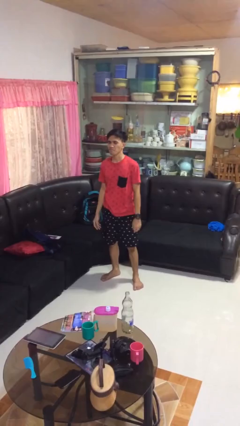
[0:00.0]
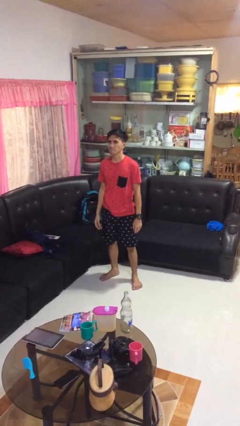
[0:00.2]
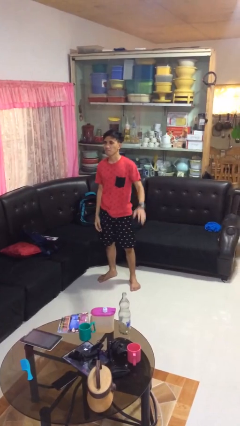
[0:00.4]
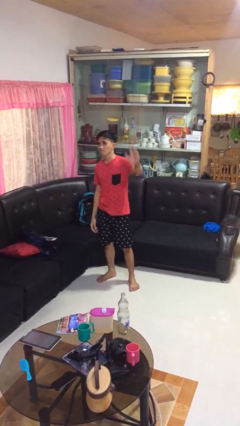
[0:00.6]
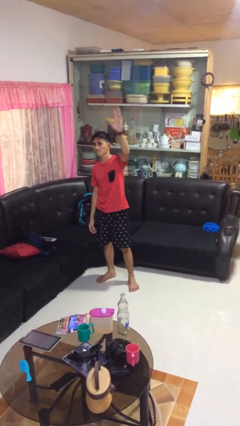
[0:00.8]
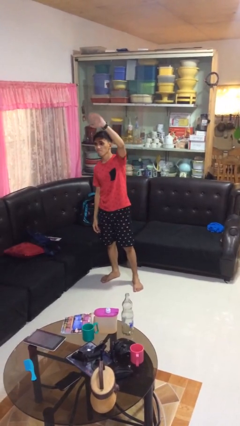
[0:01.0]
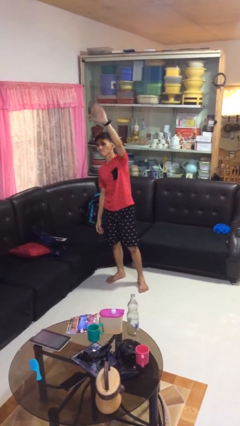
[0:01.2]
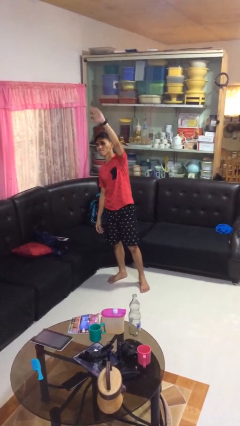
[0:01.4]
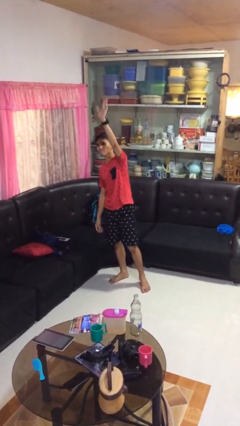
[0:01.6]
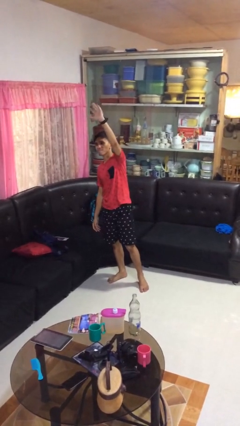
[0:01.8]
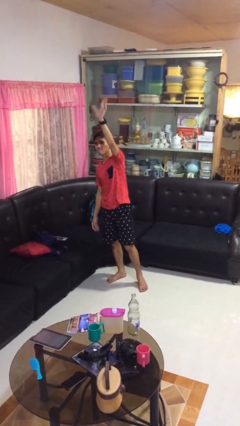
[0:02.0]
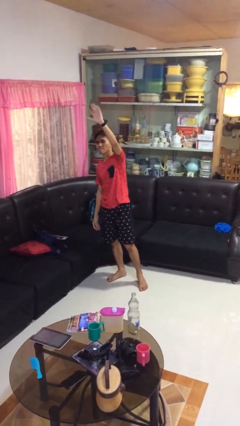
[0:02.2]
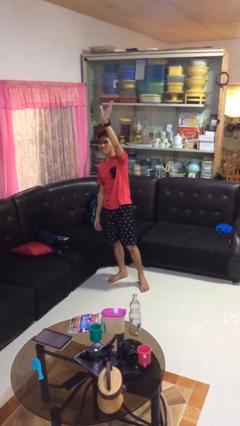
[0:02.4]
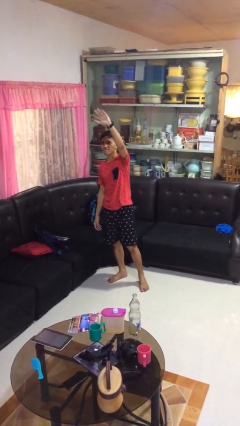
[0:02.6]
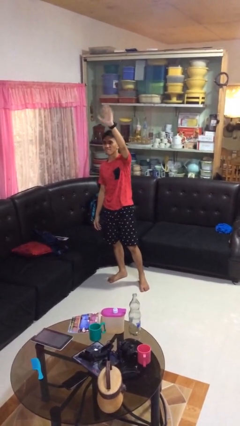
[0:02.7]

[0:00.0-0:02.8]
person waves at person

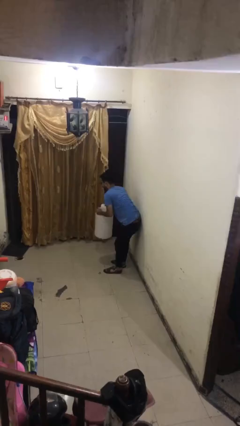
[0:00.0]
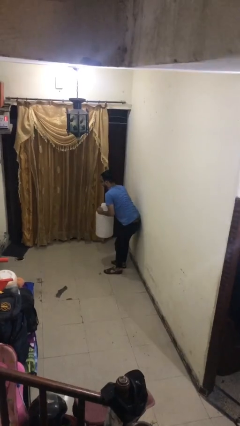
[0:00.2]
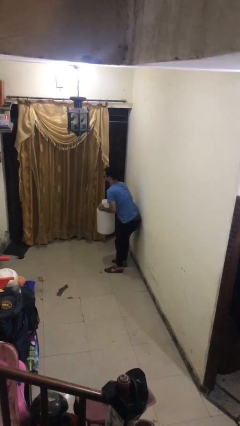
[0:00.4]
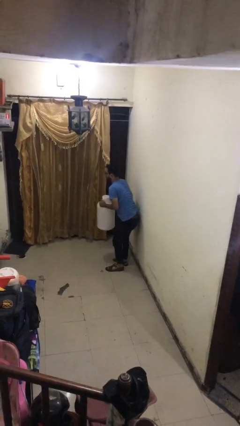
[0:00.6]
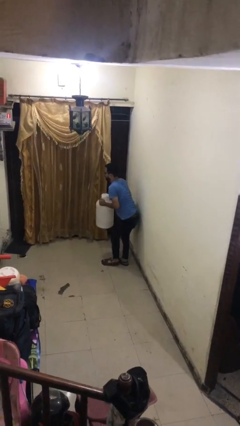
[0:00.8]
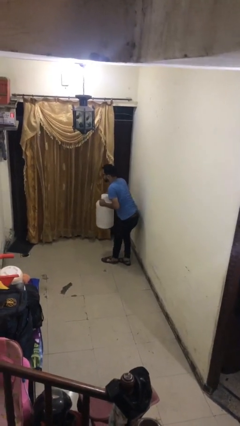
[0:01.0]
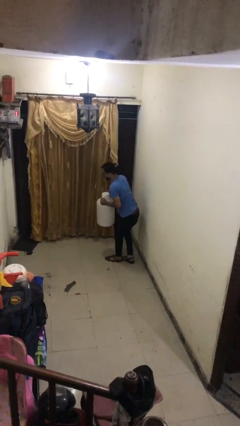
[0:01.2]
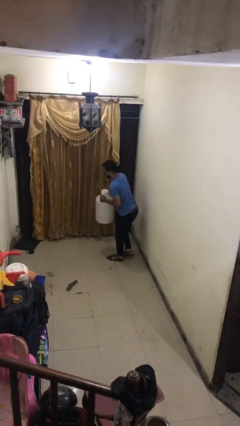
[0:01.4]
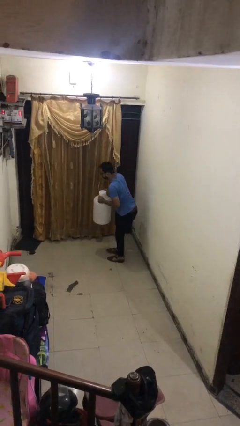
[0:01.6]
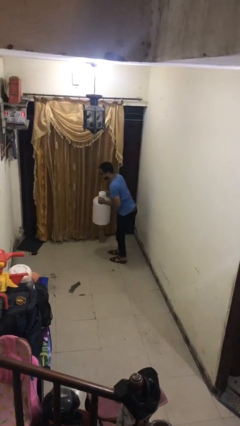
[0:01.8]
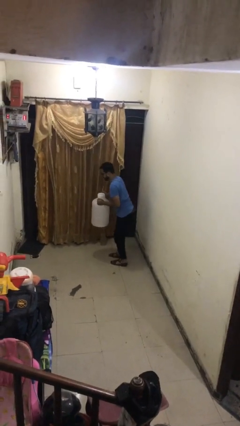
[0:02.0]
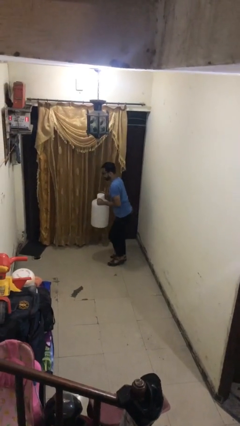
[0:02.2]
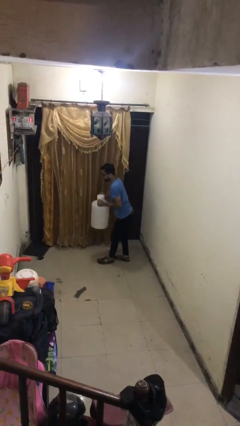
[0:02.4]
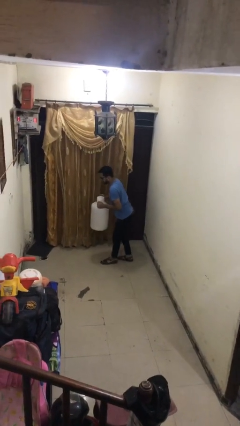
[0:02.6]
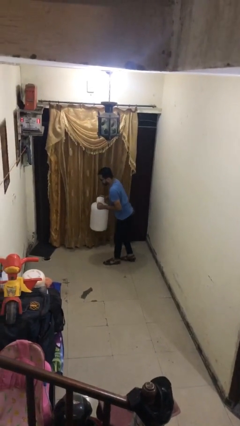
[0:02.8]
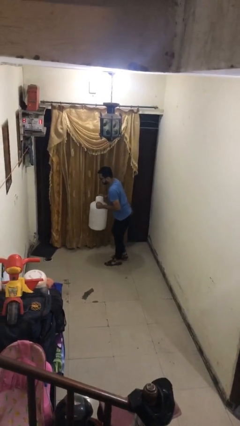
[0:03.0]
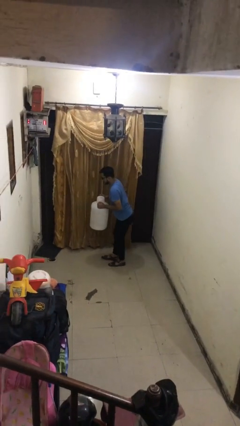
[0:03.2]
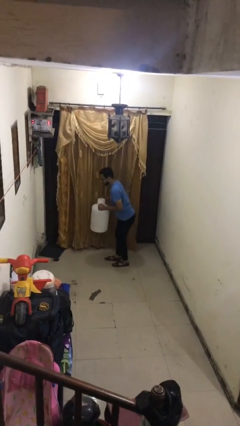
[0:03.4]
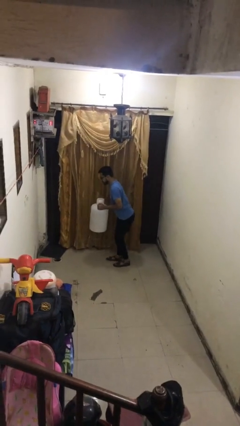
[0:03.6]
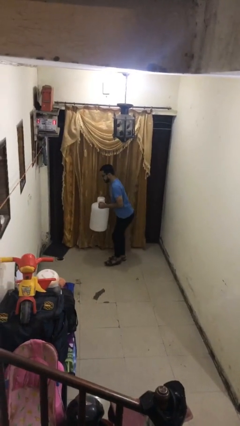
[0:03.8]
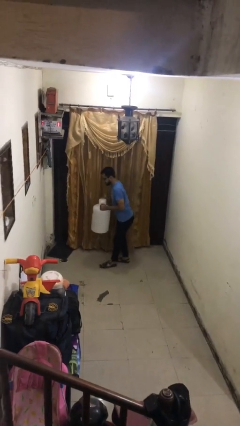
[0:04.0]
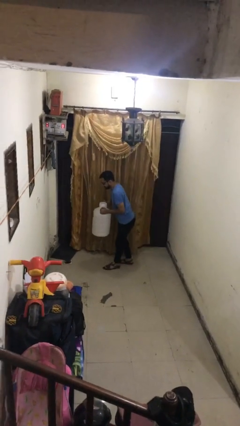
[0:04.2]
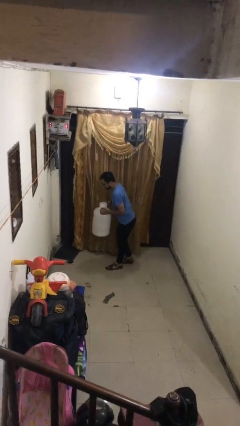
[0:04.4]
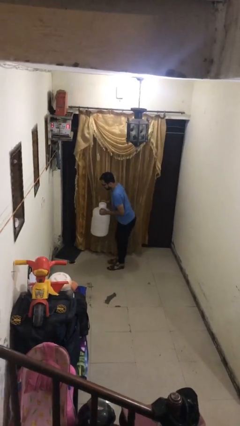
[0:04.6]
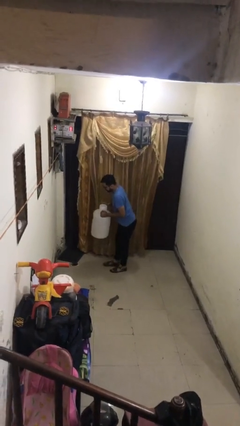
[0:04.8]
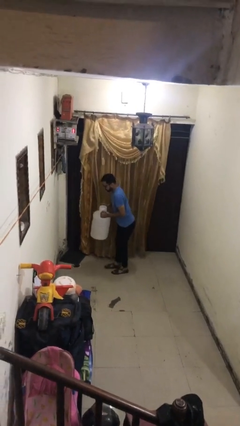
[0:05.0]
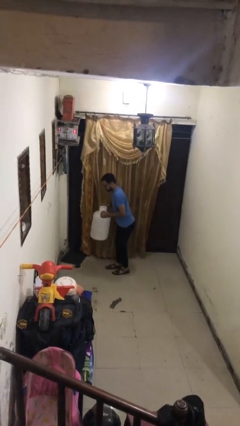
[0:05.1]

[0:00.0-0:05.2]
person carries heavy object

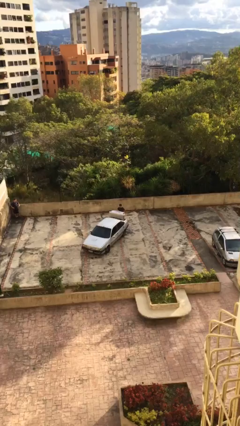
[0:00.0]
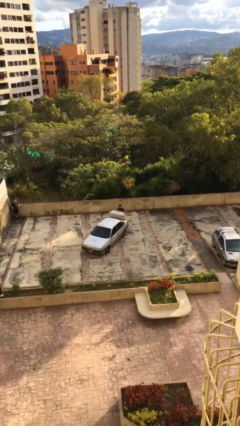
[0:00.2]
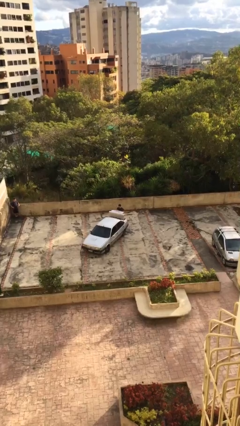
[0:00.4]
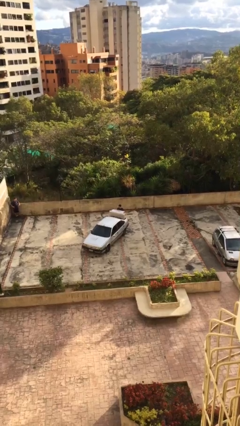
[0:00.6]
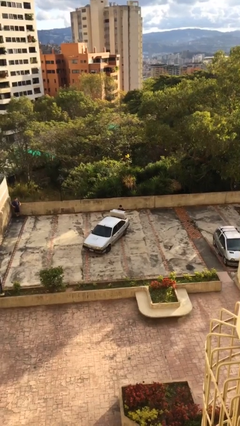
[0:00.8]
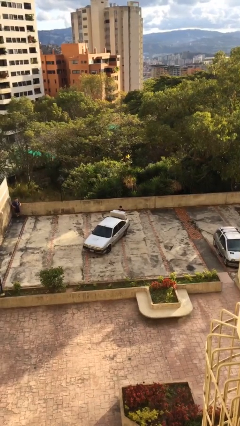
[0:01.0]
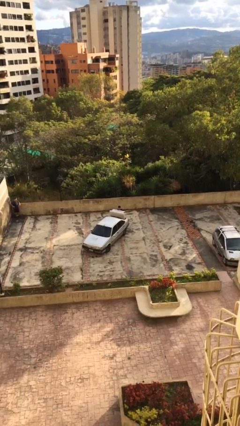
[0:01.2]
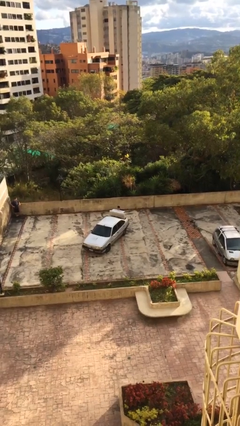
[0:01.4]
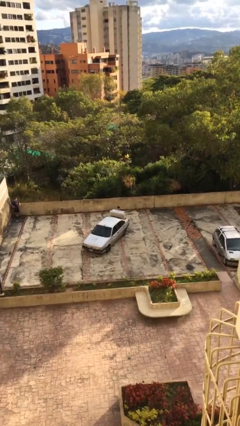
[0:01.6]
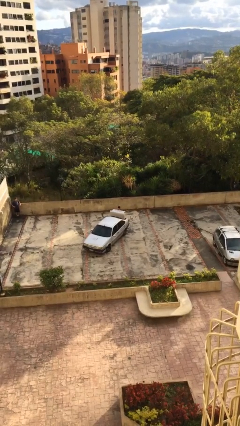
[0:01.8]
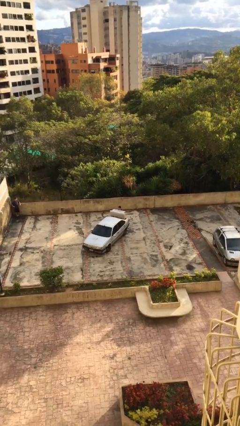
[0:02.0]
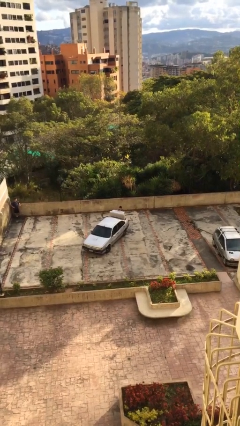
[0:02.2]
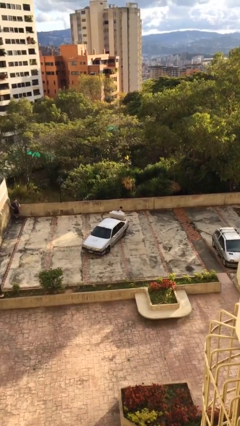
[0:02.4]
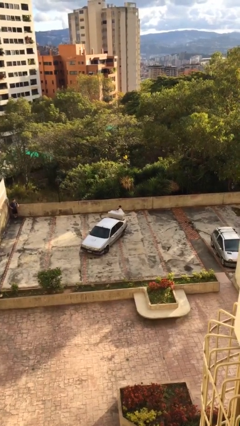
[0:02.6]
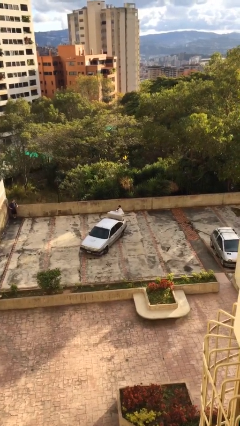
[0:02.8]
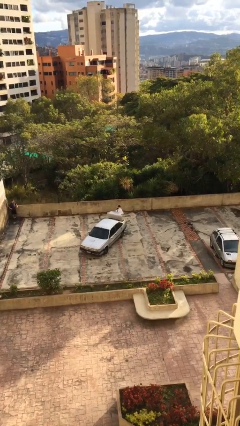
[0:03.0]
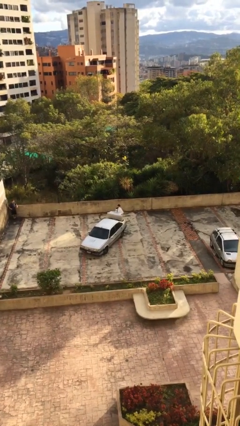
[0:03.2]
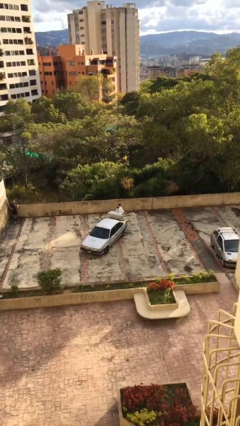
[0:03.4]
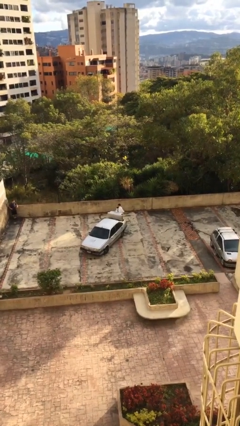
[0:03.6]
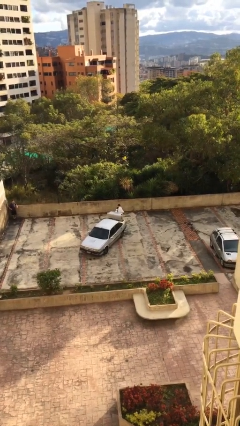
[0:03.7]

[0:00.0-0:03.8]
person unloads car

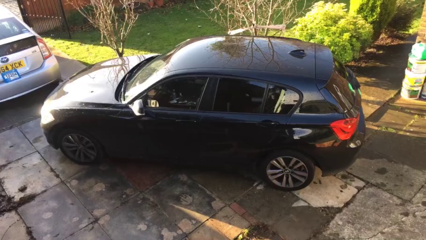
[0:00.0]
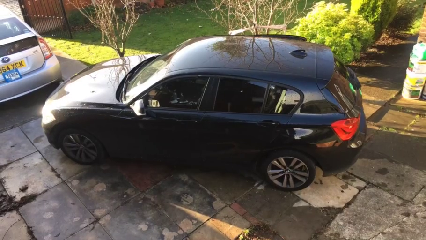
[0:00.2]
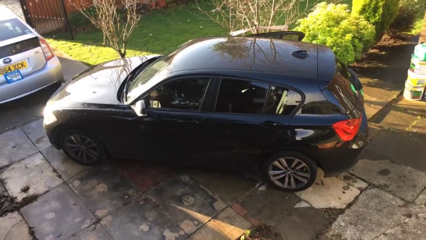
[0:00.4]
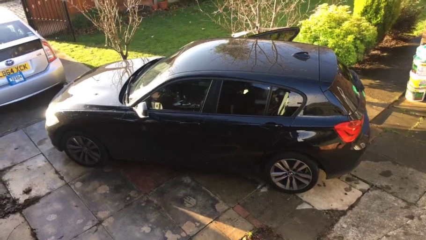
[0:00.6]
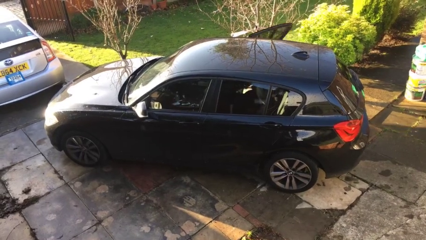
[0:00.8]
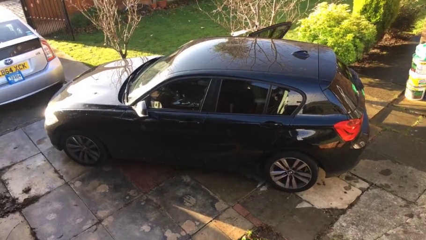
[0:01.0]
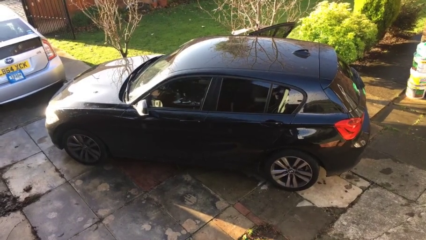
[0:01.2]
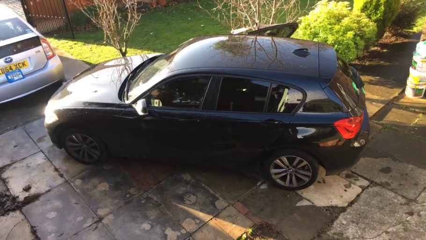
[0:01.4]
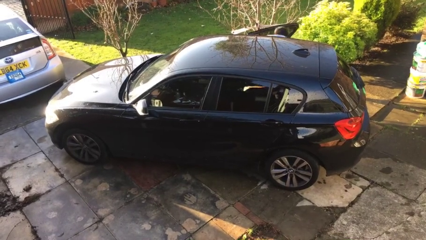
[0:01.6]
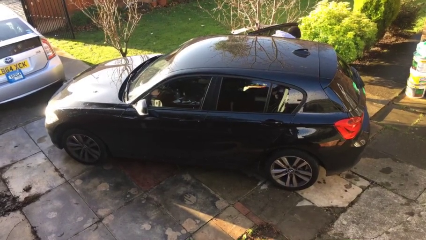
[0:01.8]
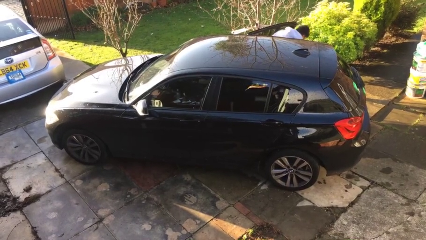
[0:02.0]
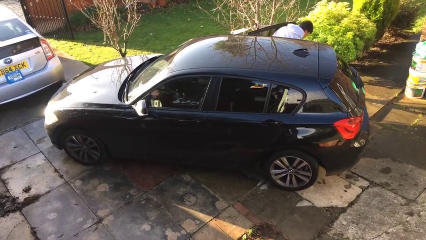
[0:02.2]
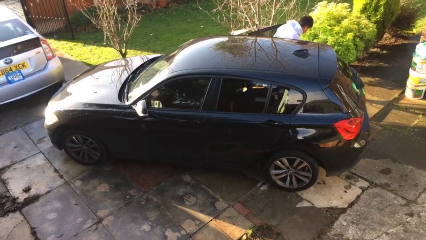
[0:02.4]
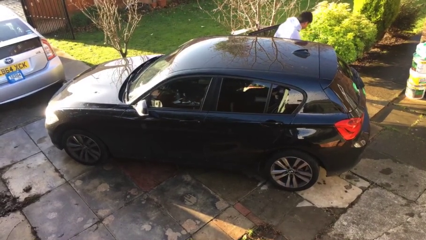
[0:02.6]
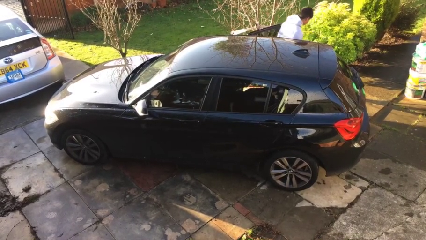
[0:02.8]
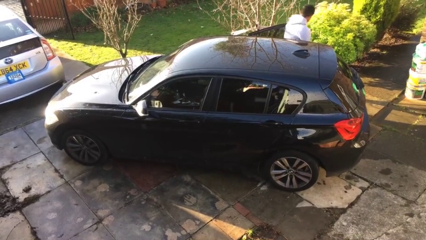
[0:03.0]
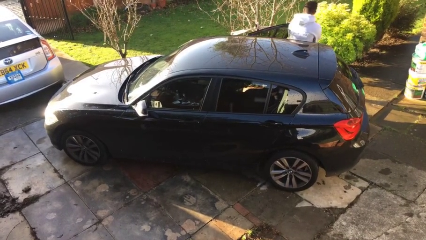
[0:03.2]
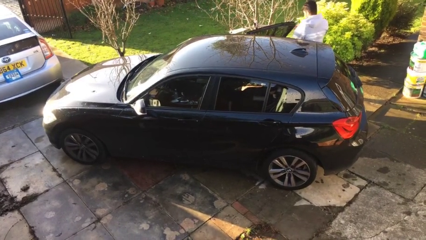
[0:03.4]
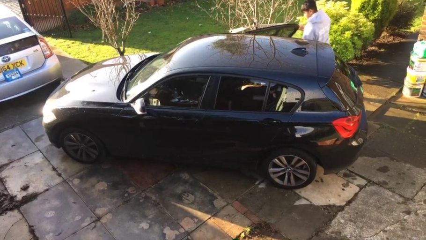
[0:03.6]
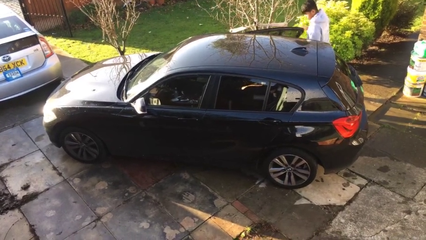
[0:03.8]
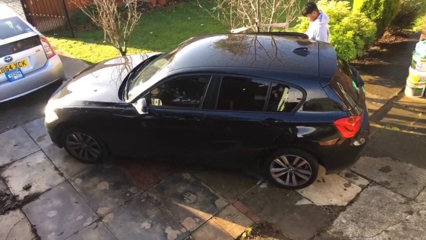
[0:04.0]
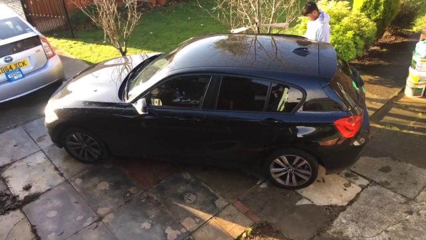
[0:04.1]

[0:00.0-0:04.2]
car drops off person

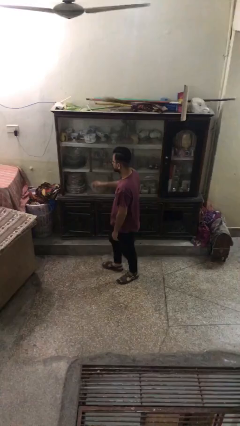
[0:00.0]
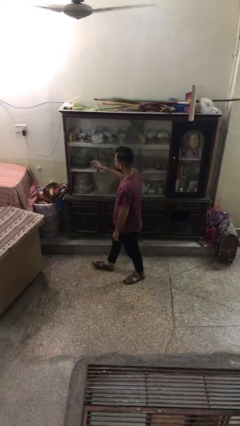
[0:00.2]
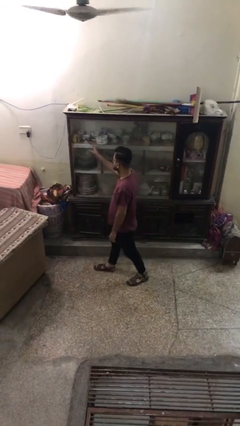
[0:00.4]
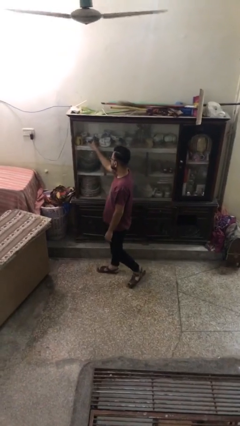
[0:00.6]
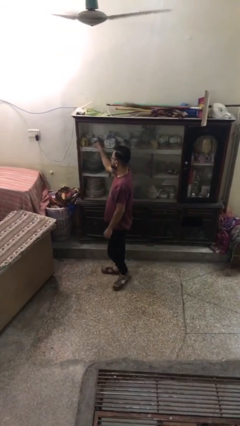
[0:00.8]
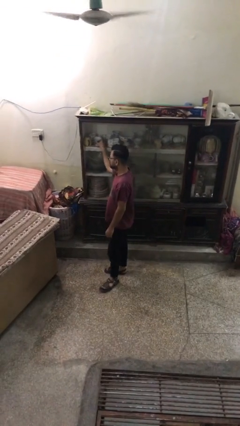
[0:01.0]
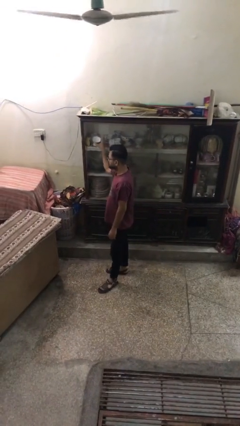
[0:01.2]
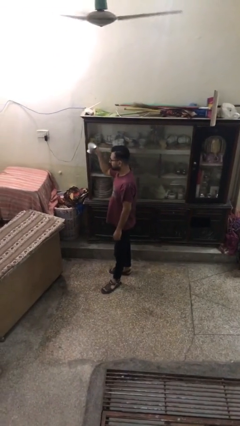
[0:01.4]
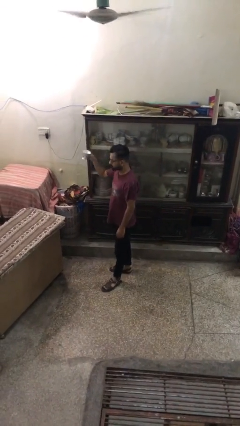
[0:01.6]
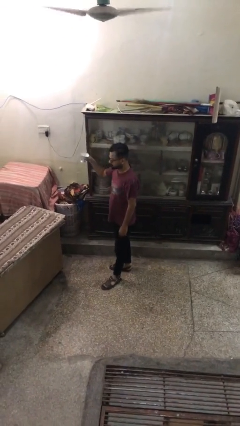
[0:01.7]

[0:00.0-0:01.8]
person picks up object from shelf
